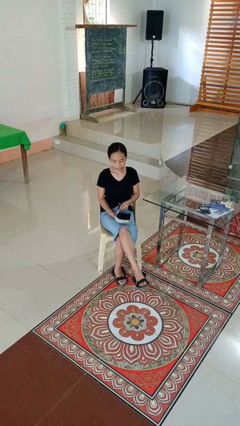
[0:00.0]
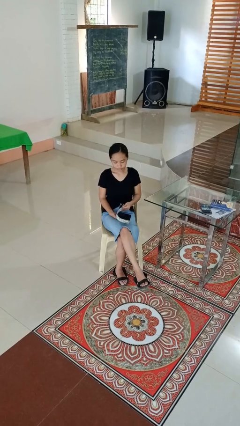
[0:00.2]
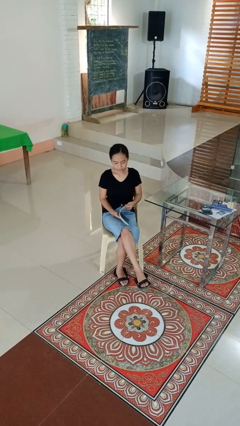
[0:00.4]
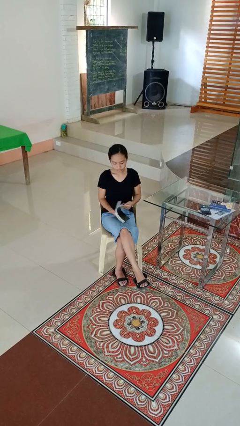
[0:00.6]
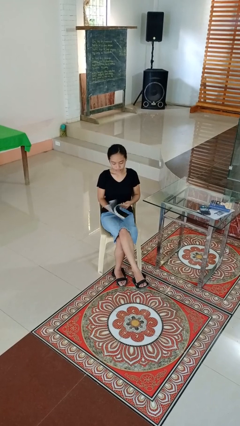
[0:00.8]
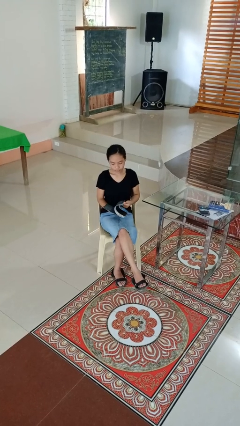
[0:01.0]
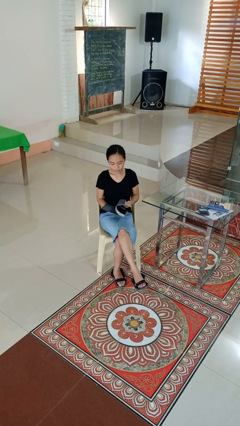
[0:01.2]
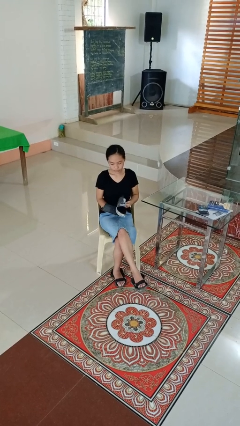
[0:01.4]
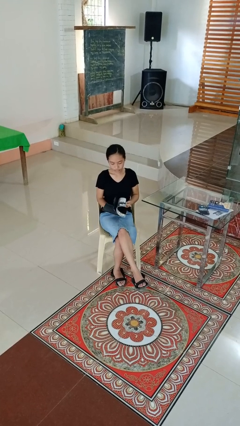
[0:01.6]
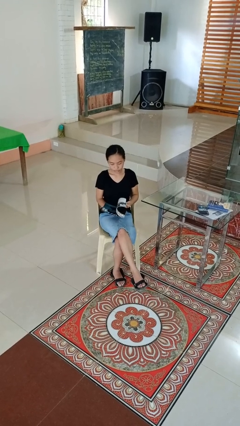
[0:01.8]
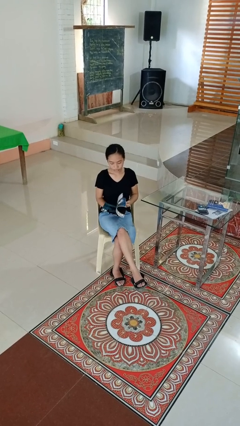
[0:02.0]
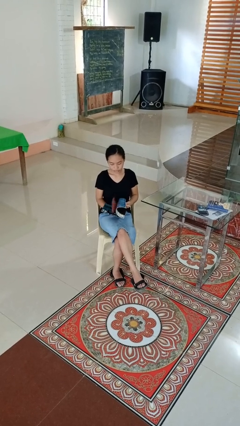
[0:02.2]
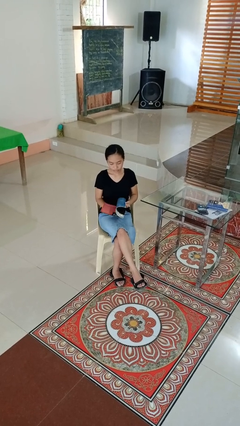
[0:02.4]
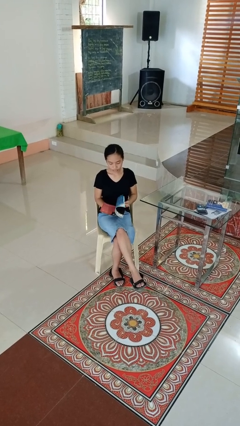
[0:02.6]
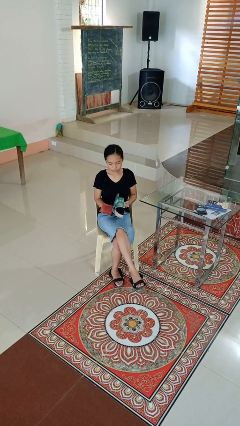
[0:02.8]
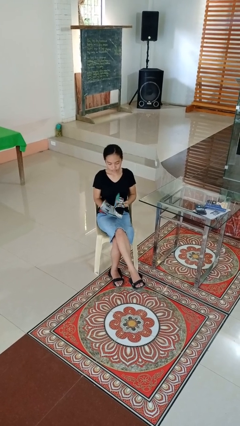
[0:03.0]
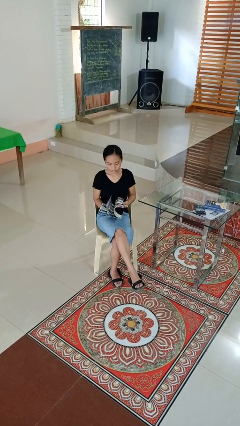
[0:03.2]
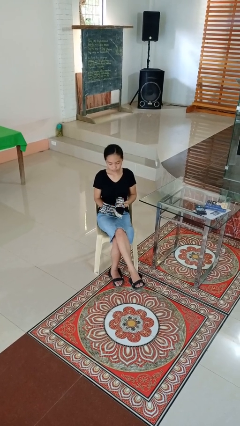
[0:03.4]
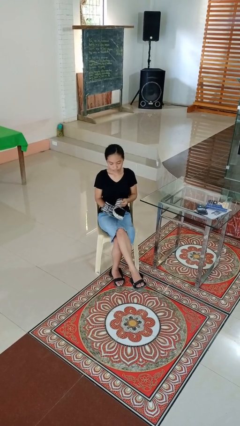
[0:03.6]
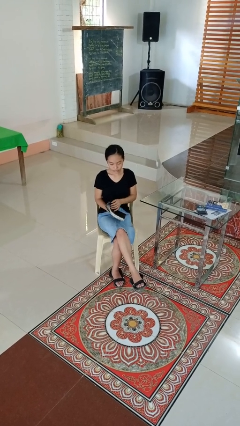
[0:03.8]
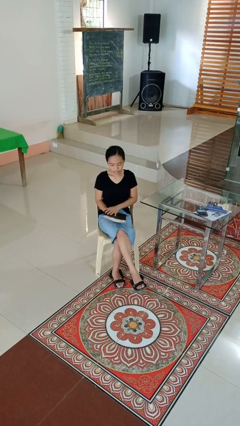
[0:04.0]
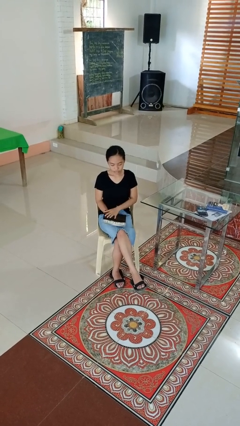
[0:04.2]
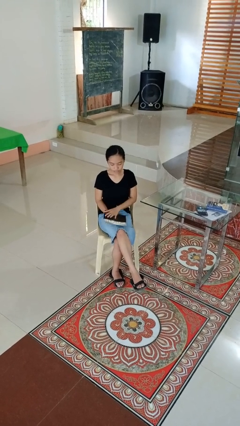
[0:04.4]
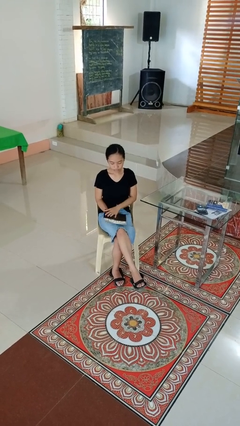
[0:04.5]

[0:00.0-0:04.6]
person reads magazine

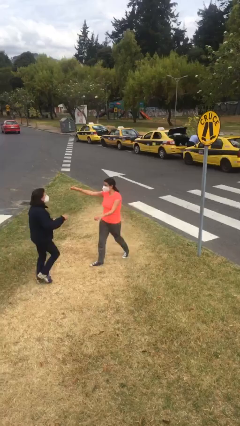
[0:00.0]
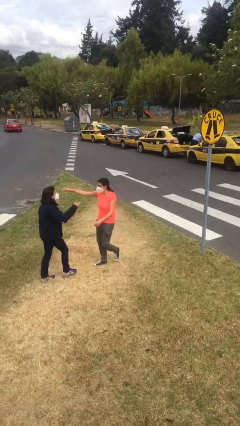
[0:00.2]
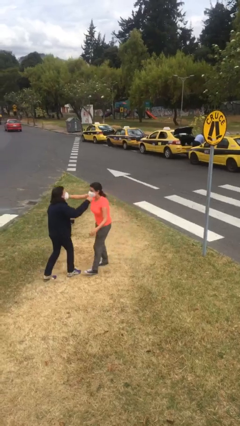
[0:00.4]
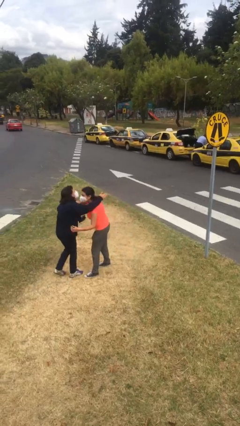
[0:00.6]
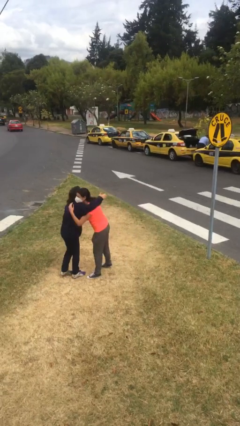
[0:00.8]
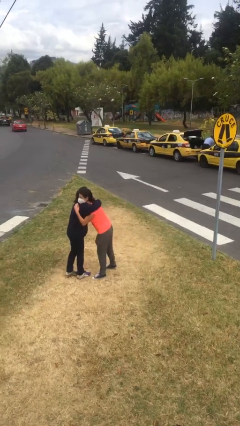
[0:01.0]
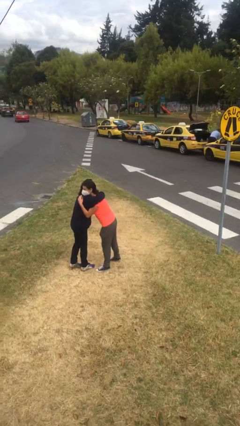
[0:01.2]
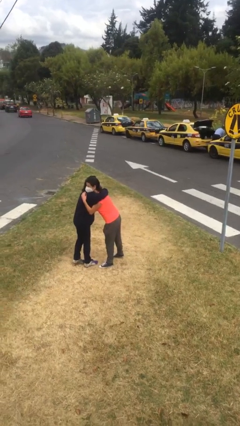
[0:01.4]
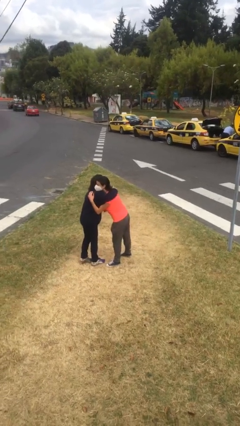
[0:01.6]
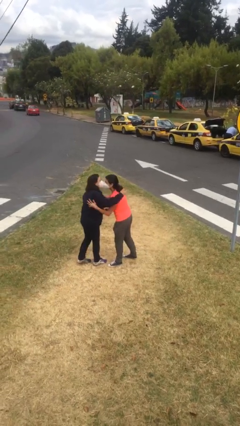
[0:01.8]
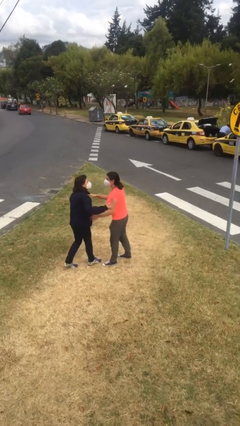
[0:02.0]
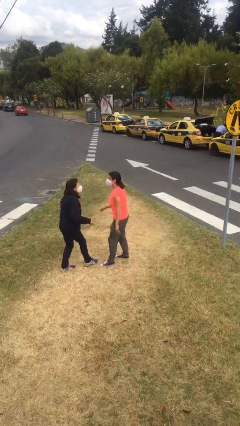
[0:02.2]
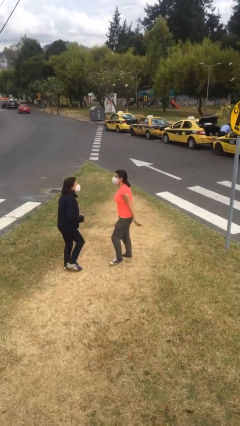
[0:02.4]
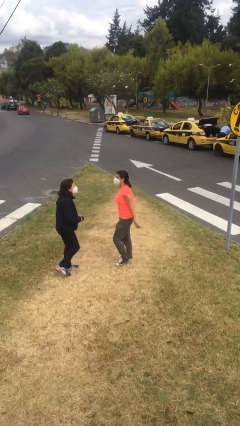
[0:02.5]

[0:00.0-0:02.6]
person embraces person

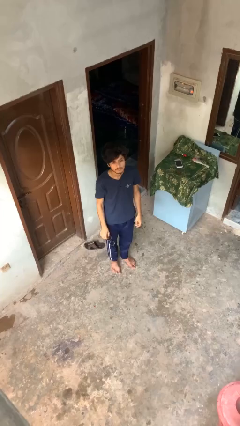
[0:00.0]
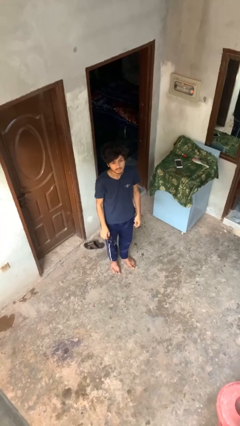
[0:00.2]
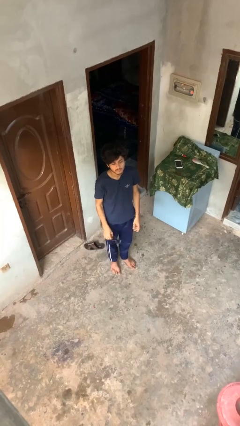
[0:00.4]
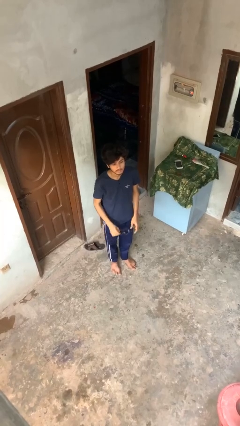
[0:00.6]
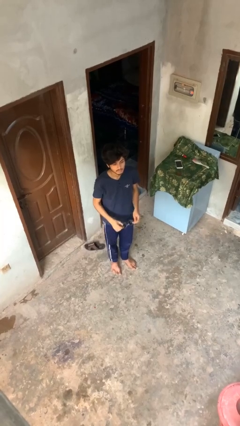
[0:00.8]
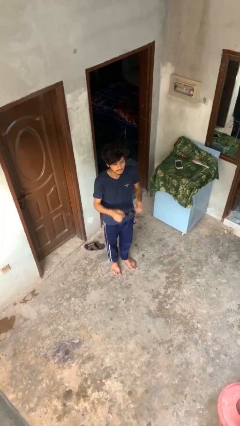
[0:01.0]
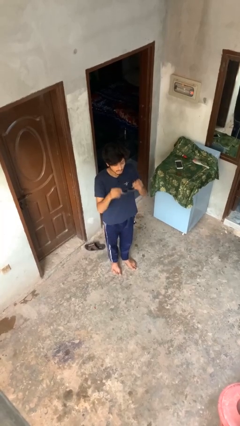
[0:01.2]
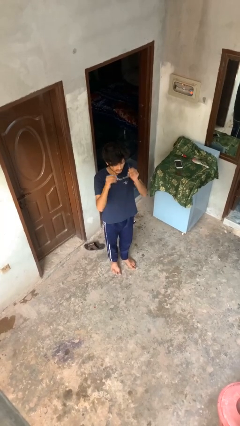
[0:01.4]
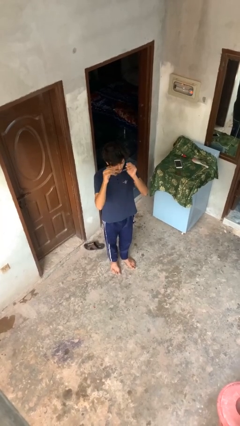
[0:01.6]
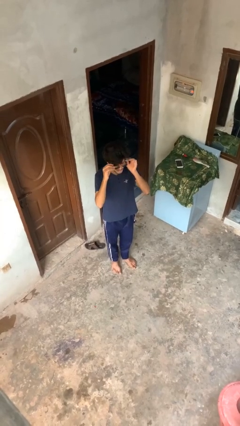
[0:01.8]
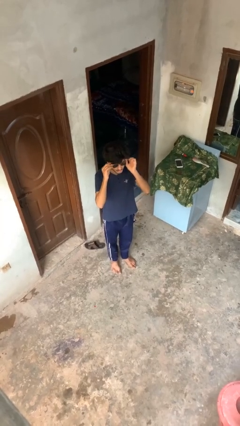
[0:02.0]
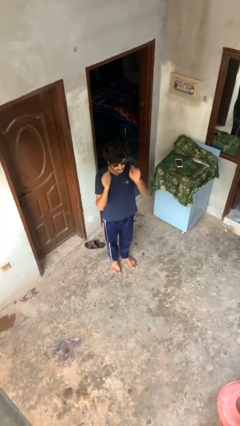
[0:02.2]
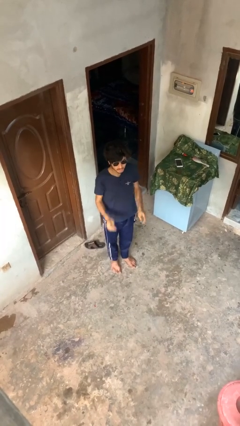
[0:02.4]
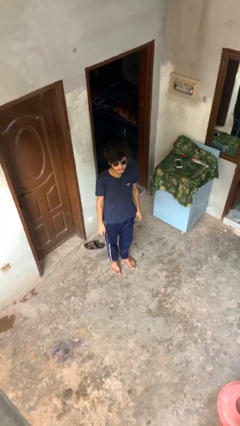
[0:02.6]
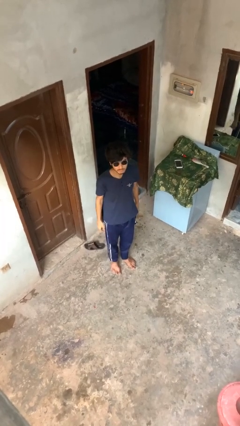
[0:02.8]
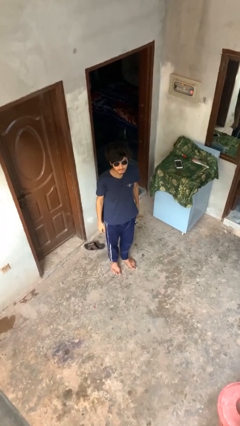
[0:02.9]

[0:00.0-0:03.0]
person puts on sunglasses

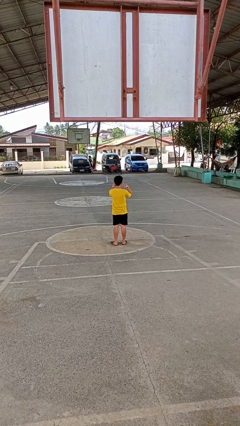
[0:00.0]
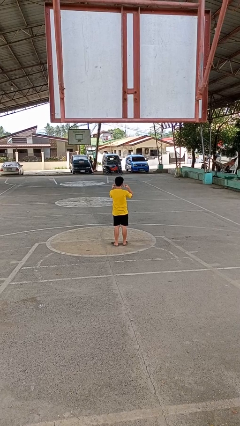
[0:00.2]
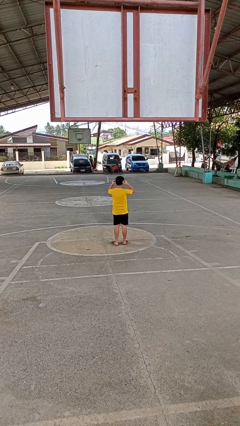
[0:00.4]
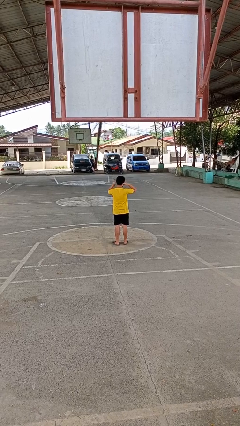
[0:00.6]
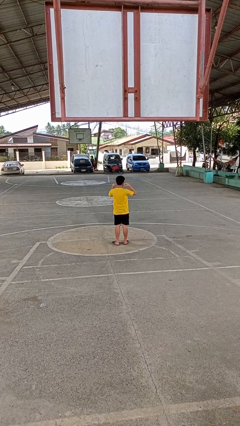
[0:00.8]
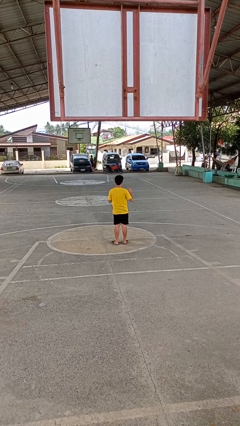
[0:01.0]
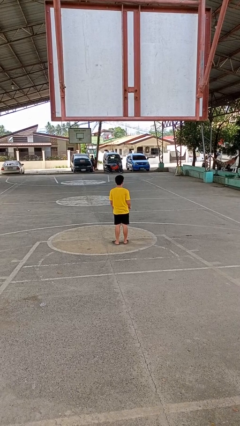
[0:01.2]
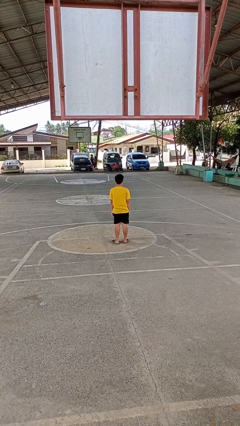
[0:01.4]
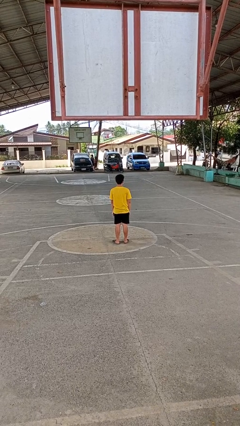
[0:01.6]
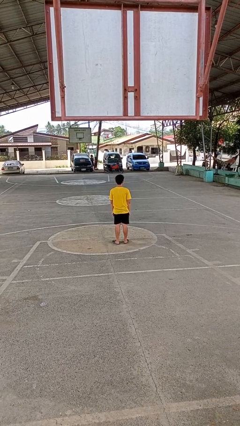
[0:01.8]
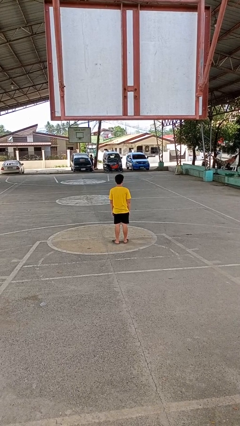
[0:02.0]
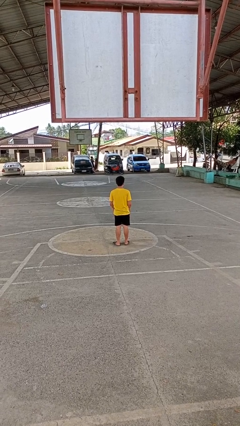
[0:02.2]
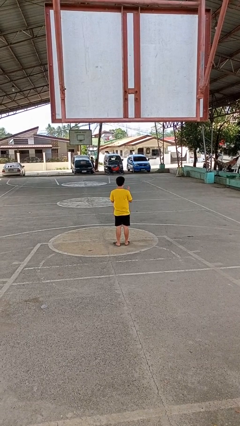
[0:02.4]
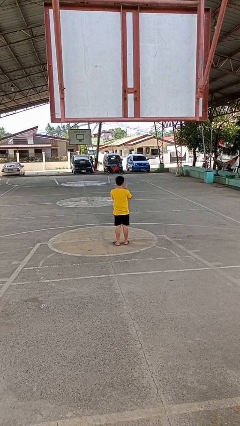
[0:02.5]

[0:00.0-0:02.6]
person puts on facemask

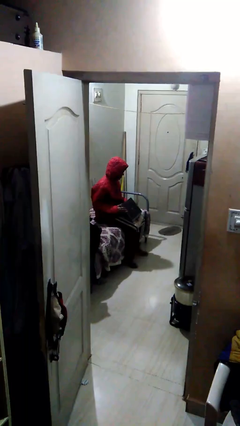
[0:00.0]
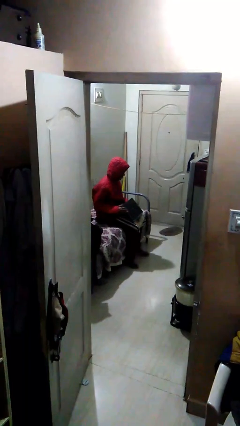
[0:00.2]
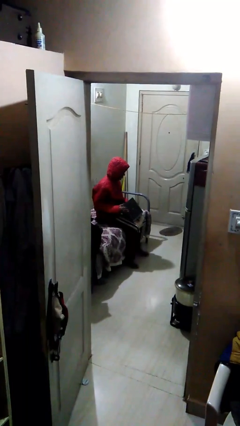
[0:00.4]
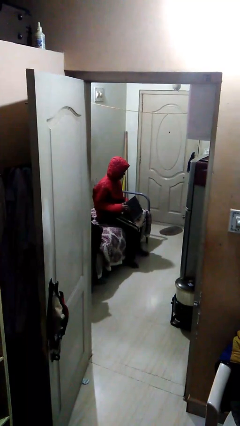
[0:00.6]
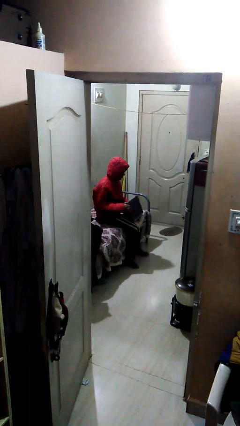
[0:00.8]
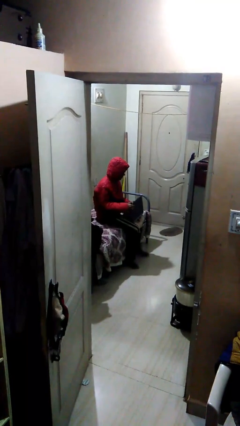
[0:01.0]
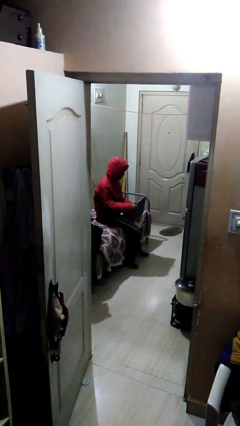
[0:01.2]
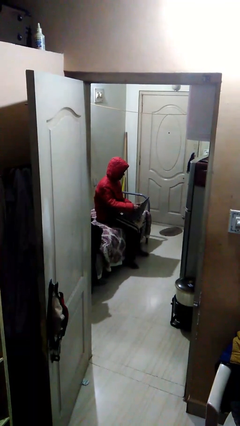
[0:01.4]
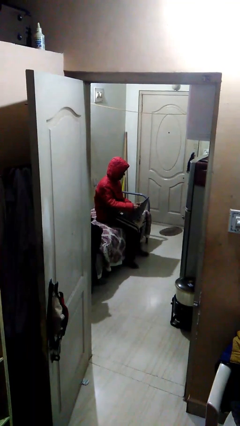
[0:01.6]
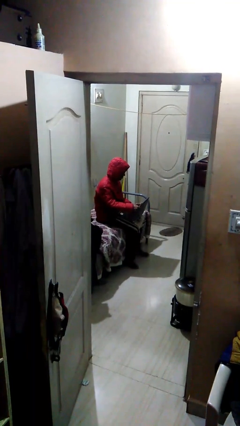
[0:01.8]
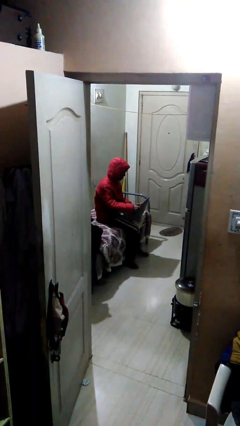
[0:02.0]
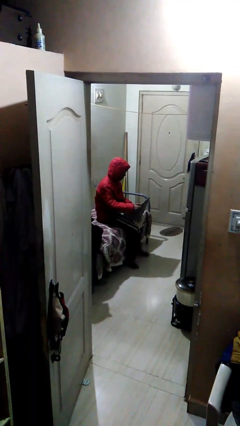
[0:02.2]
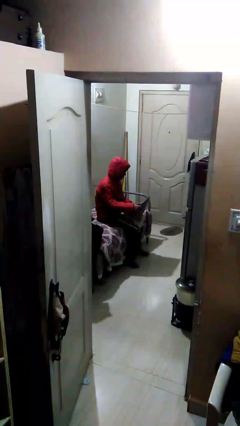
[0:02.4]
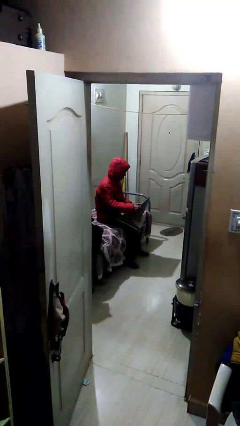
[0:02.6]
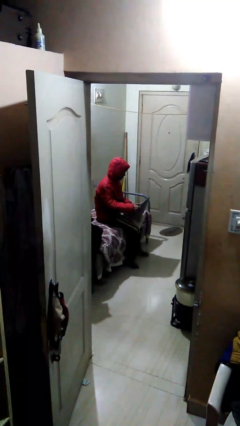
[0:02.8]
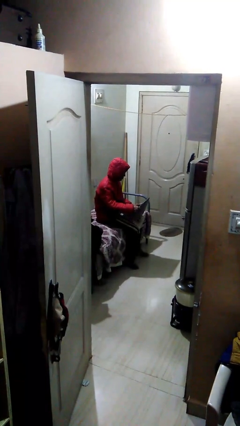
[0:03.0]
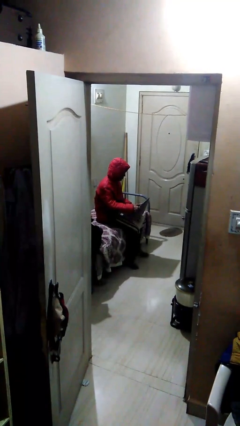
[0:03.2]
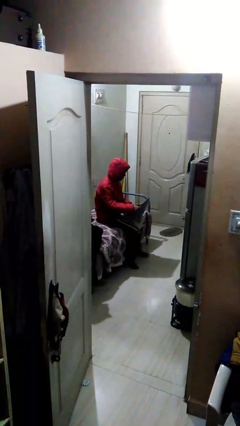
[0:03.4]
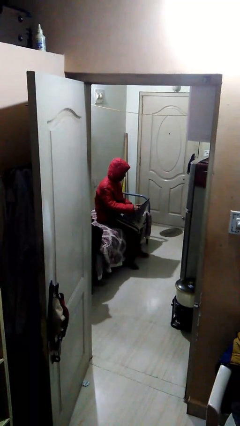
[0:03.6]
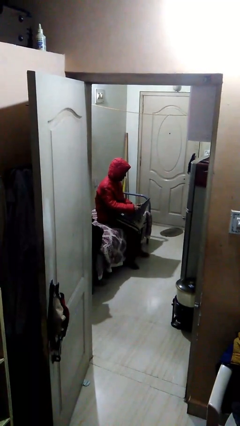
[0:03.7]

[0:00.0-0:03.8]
person interacts with laptop

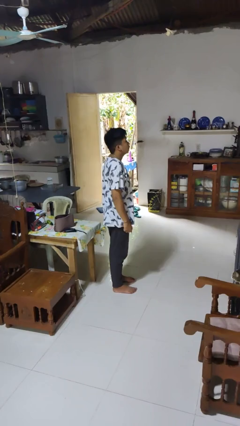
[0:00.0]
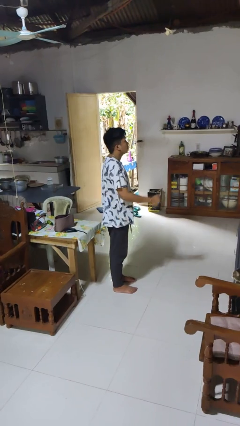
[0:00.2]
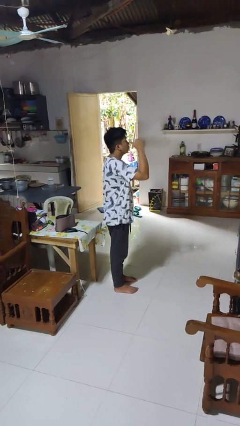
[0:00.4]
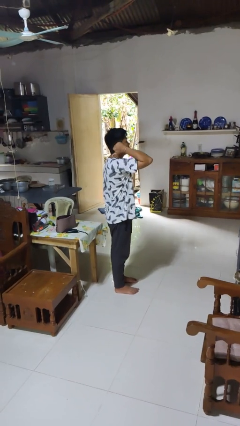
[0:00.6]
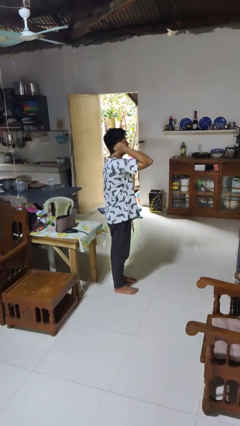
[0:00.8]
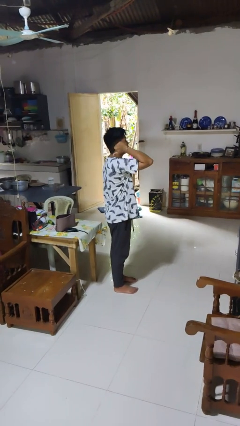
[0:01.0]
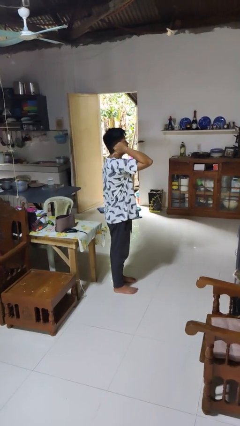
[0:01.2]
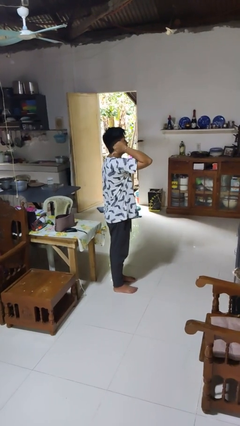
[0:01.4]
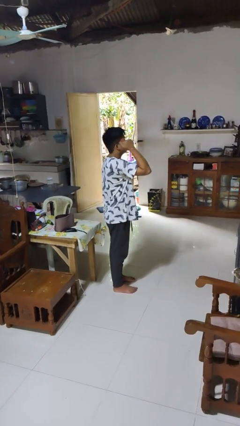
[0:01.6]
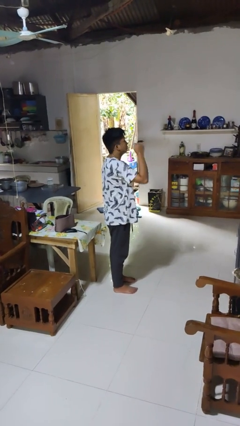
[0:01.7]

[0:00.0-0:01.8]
person gestures behind me
